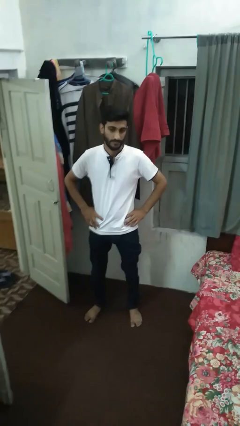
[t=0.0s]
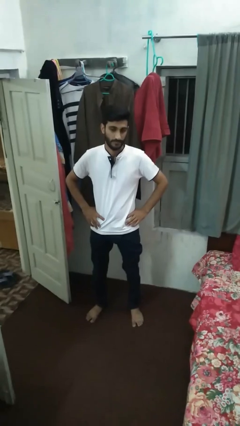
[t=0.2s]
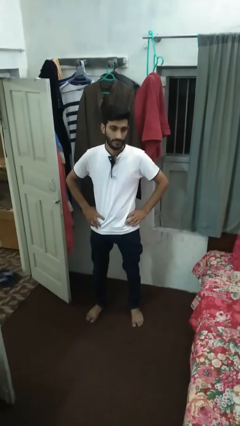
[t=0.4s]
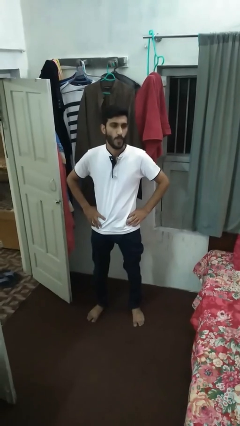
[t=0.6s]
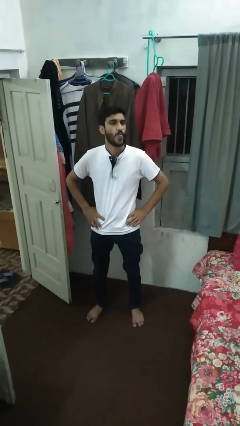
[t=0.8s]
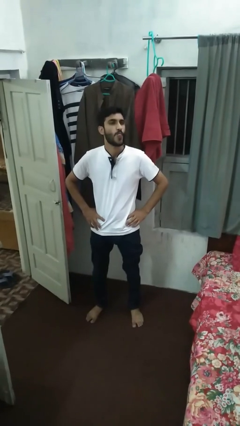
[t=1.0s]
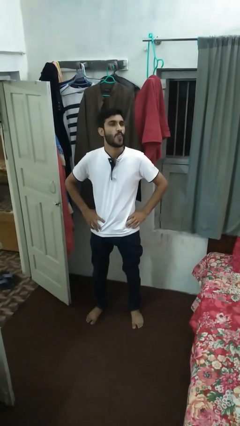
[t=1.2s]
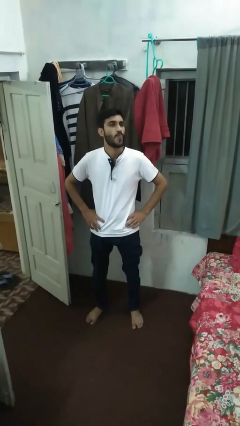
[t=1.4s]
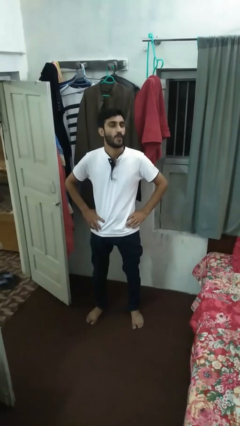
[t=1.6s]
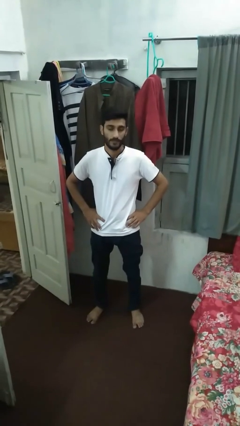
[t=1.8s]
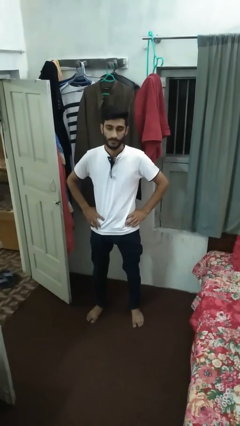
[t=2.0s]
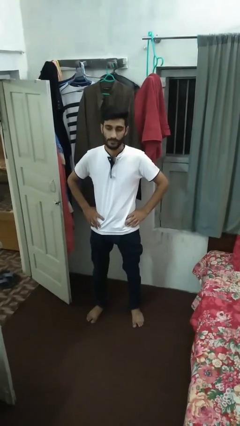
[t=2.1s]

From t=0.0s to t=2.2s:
person sticks out tongue

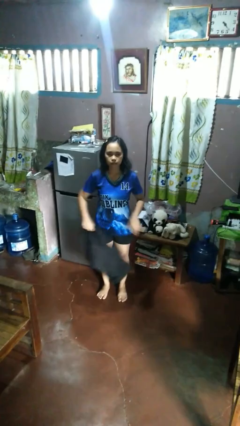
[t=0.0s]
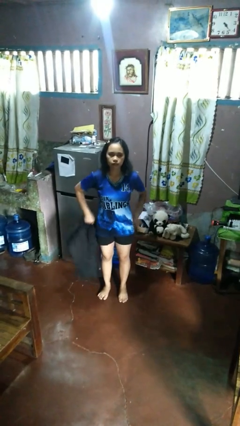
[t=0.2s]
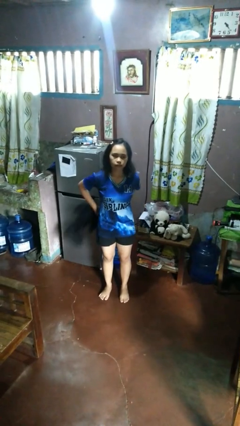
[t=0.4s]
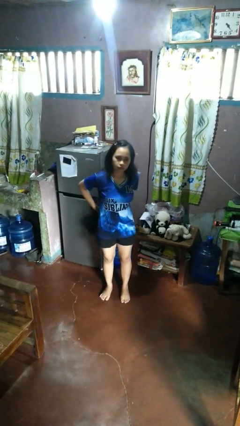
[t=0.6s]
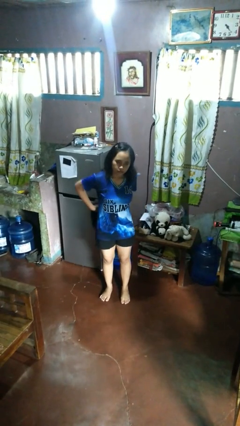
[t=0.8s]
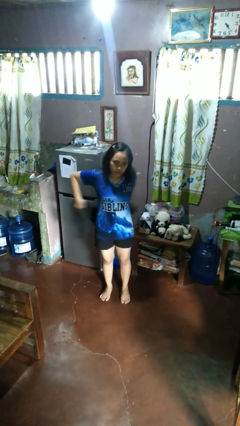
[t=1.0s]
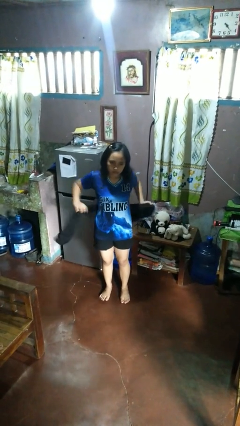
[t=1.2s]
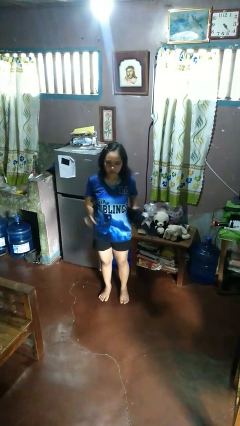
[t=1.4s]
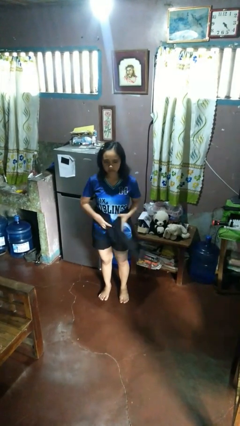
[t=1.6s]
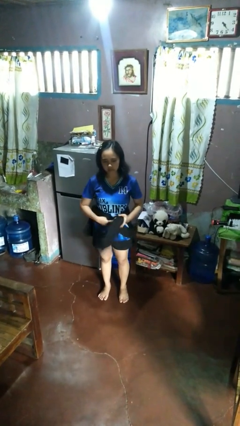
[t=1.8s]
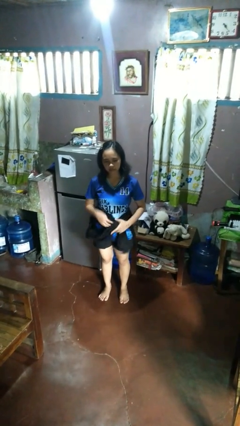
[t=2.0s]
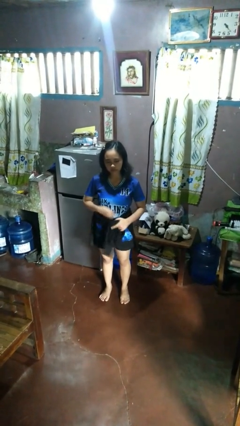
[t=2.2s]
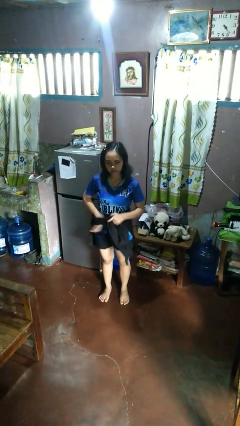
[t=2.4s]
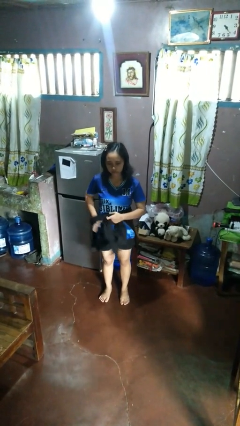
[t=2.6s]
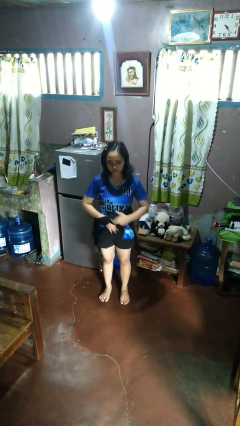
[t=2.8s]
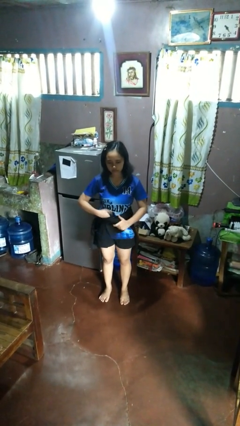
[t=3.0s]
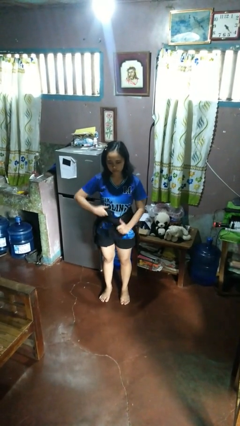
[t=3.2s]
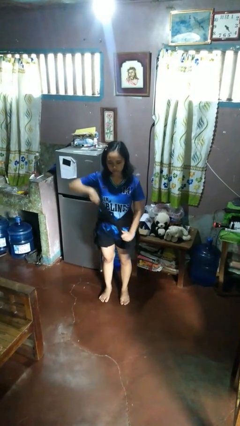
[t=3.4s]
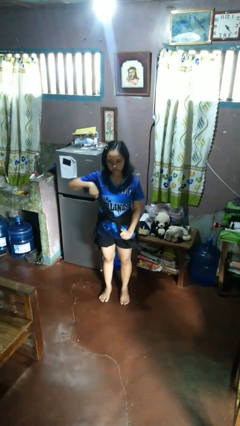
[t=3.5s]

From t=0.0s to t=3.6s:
person ties jacket around waist

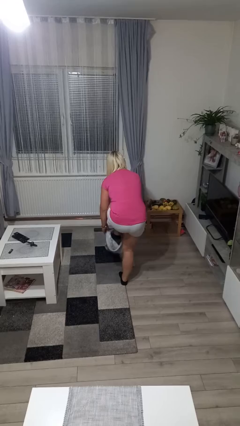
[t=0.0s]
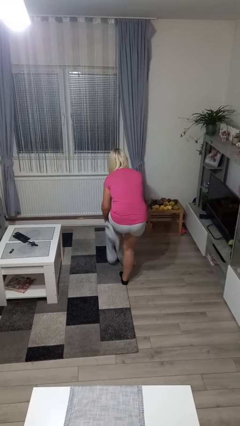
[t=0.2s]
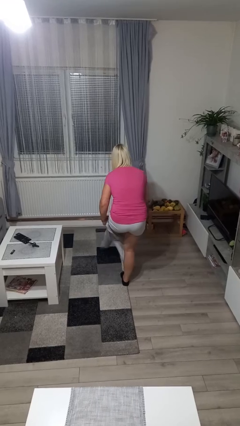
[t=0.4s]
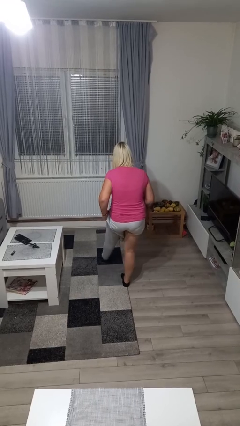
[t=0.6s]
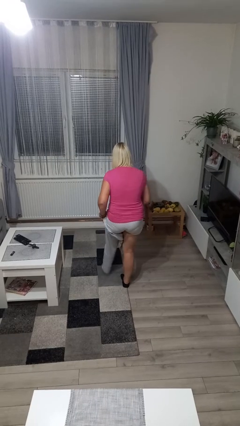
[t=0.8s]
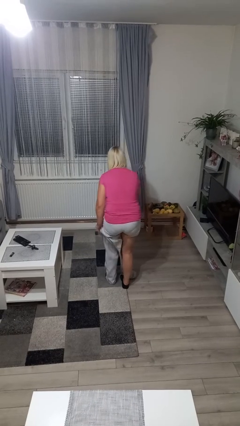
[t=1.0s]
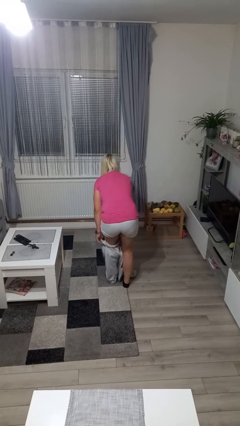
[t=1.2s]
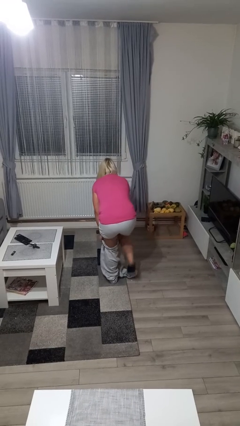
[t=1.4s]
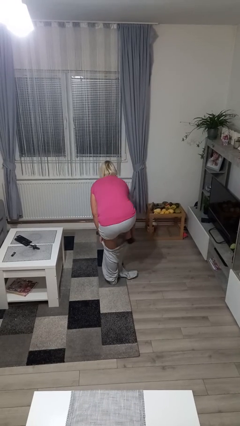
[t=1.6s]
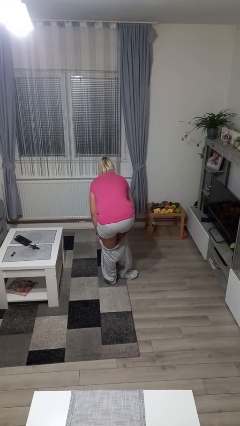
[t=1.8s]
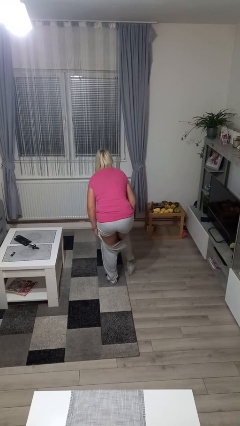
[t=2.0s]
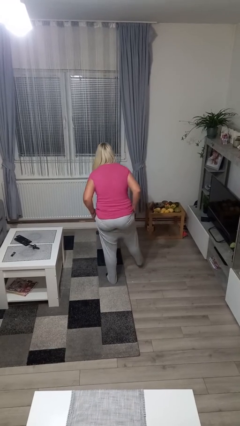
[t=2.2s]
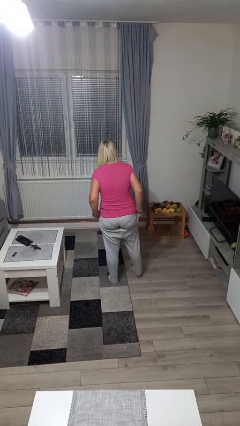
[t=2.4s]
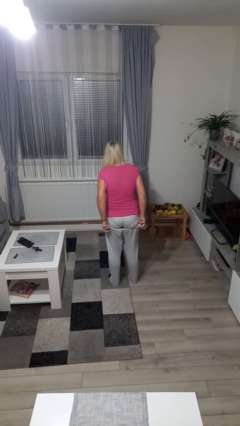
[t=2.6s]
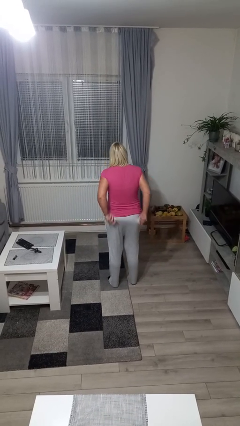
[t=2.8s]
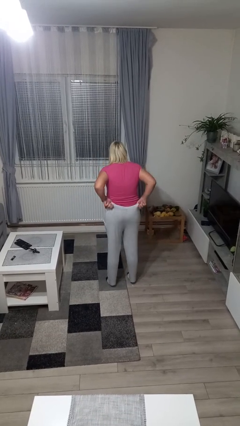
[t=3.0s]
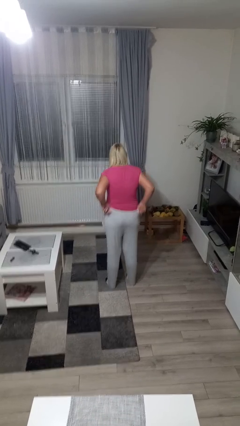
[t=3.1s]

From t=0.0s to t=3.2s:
person puts on pants

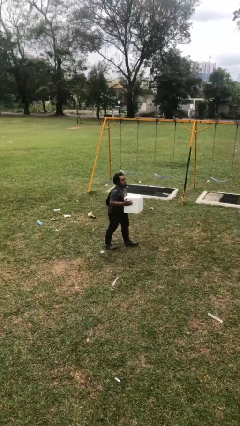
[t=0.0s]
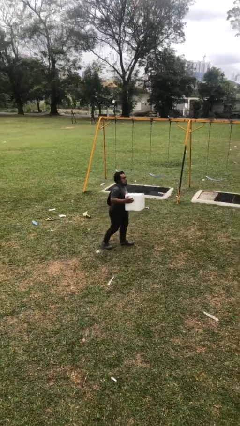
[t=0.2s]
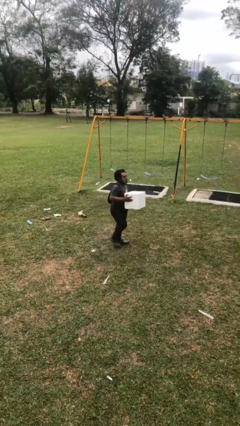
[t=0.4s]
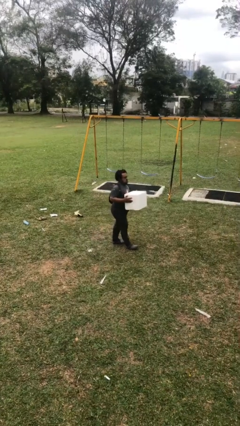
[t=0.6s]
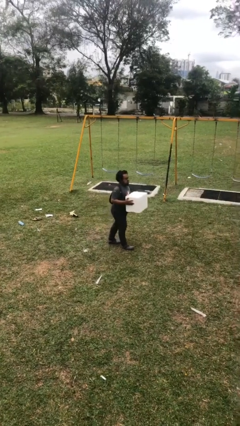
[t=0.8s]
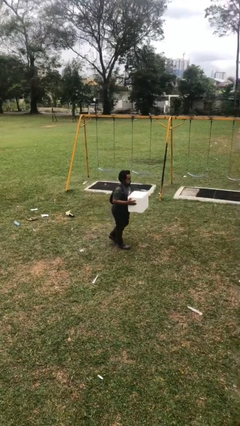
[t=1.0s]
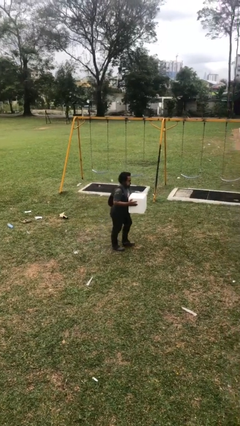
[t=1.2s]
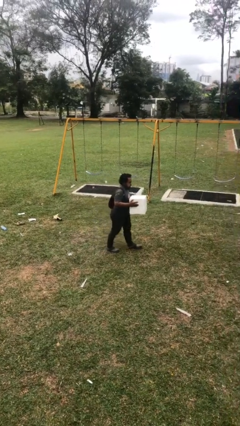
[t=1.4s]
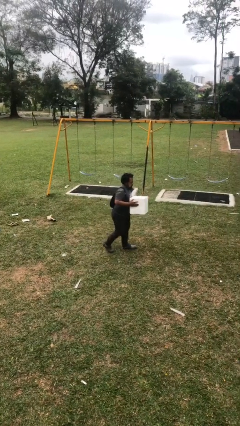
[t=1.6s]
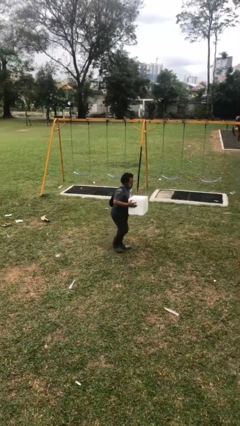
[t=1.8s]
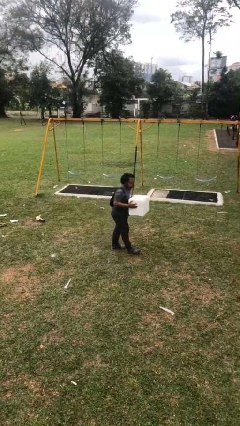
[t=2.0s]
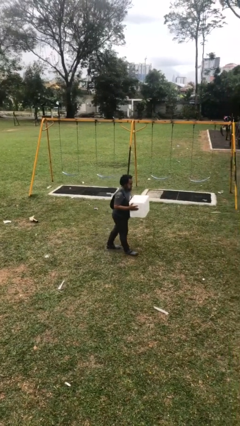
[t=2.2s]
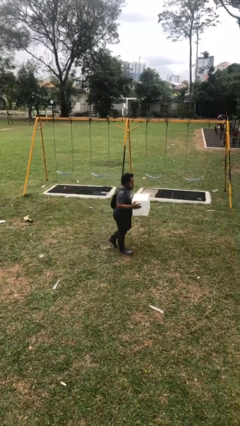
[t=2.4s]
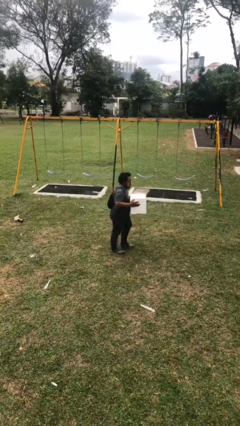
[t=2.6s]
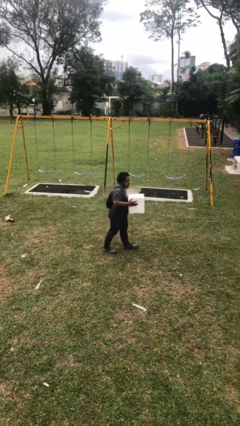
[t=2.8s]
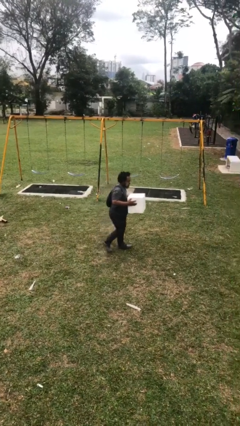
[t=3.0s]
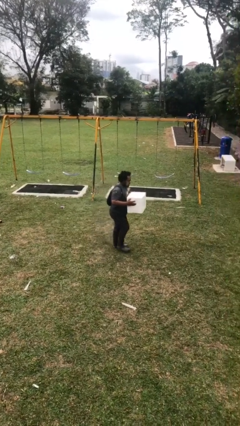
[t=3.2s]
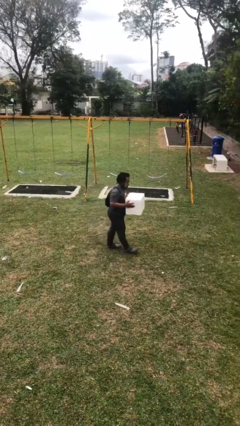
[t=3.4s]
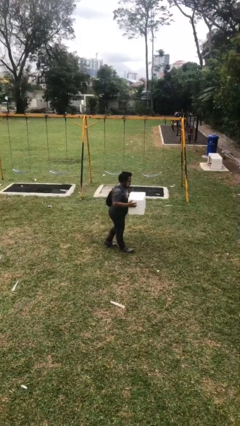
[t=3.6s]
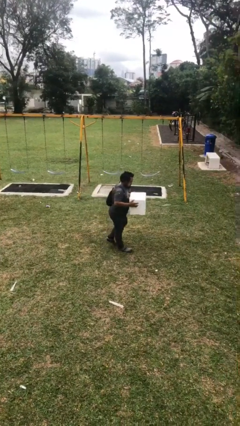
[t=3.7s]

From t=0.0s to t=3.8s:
person carries heavy object

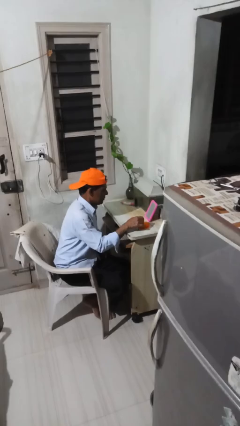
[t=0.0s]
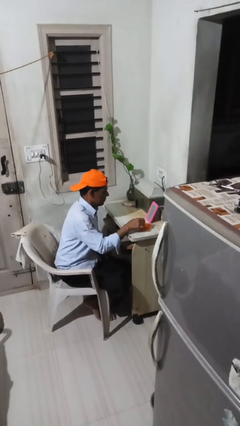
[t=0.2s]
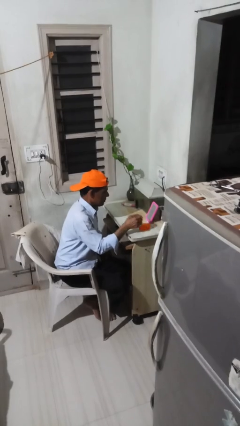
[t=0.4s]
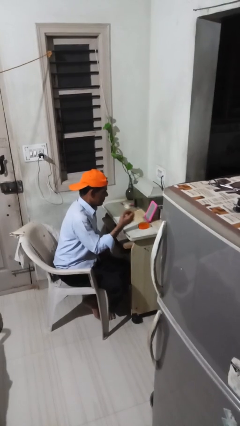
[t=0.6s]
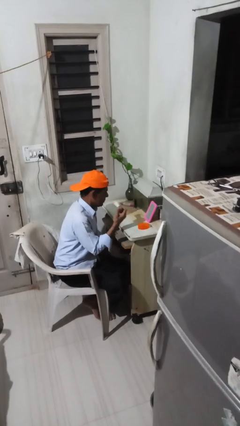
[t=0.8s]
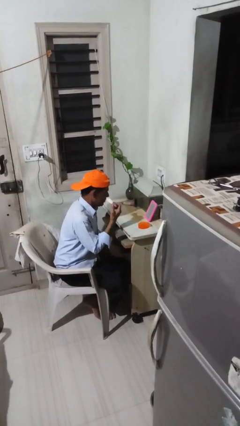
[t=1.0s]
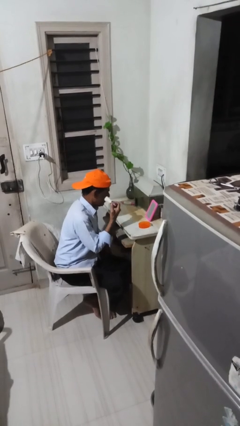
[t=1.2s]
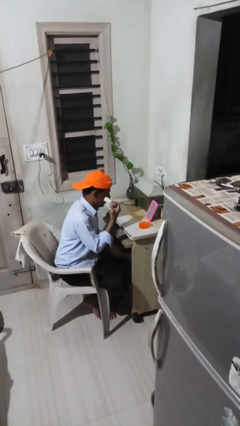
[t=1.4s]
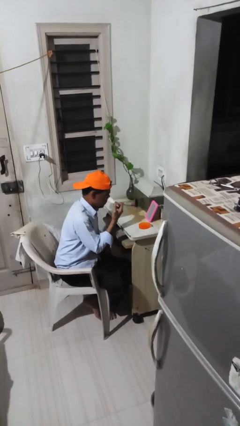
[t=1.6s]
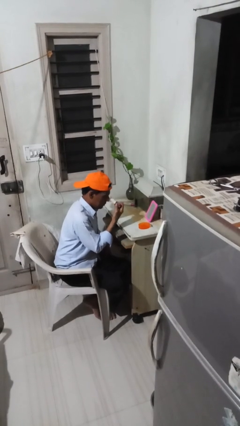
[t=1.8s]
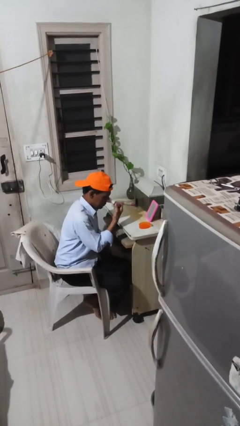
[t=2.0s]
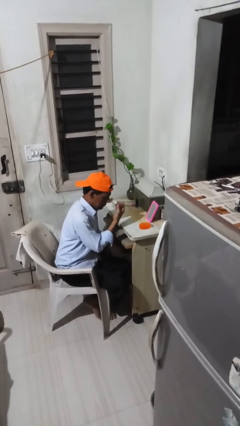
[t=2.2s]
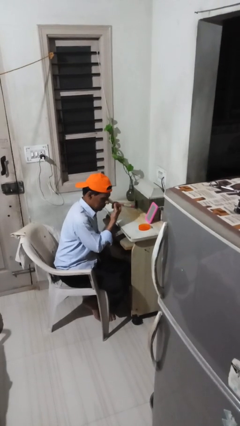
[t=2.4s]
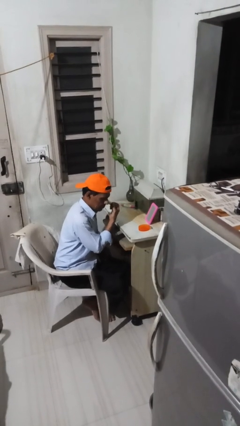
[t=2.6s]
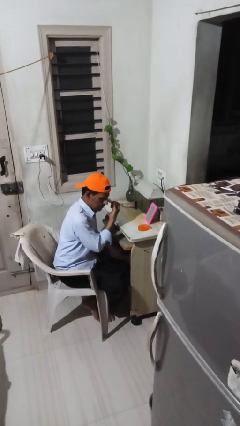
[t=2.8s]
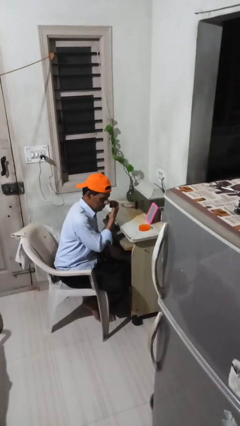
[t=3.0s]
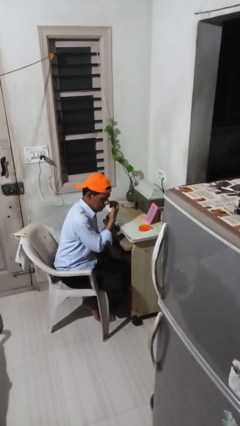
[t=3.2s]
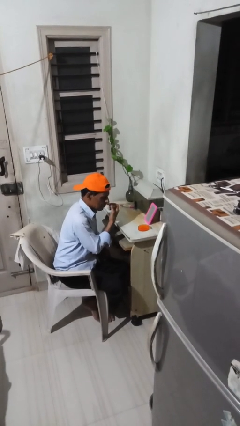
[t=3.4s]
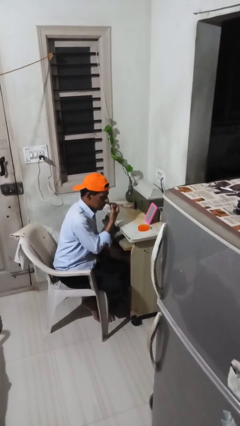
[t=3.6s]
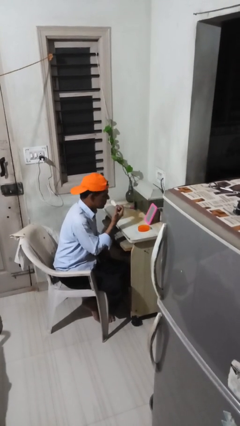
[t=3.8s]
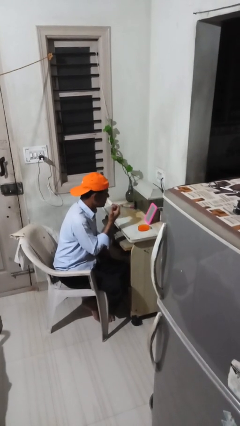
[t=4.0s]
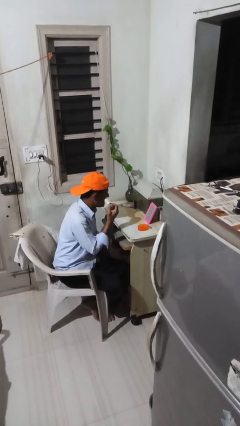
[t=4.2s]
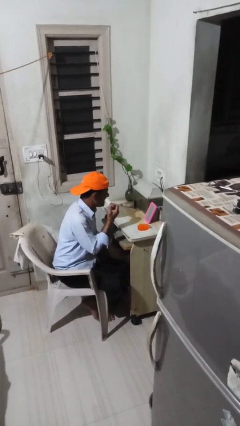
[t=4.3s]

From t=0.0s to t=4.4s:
person applies foundation makeup

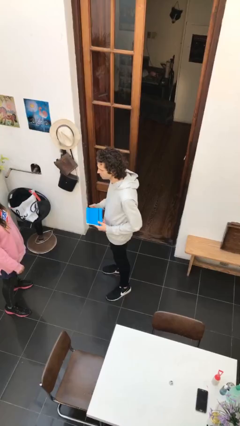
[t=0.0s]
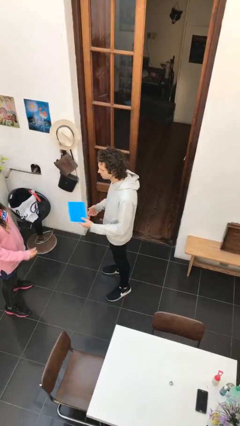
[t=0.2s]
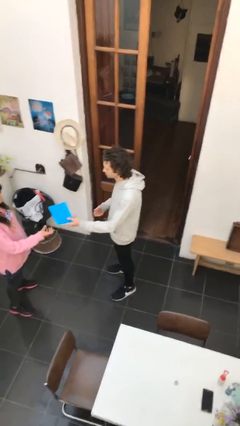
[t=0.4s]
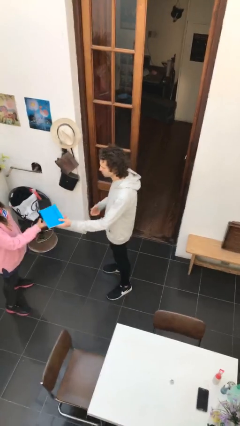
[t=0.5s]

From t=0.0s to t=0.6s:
person transfers object to person
